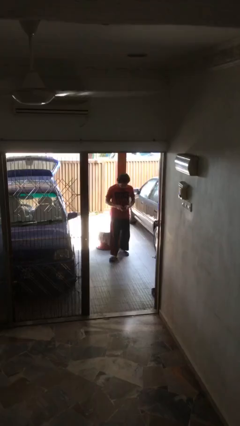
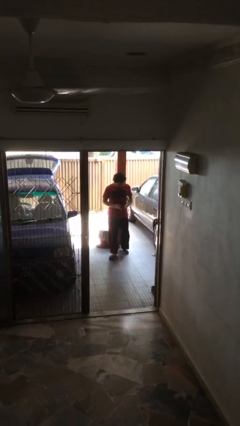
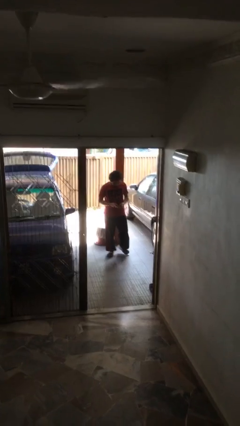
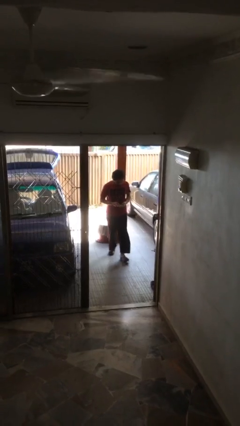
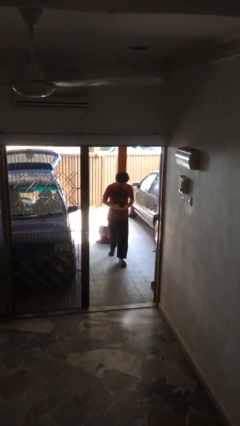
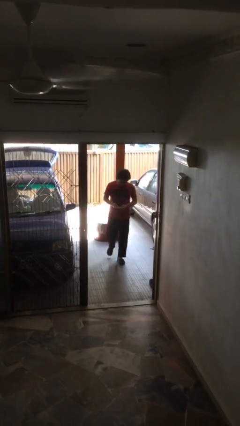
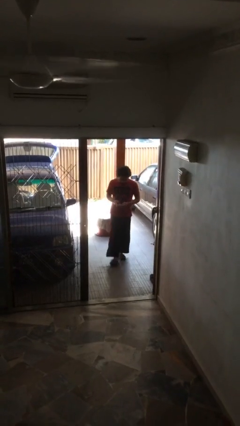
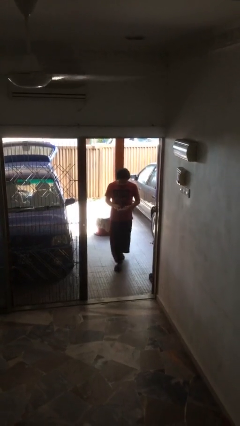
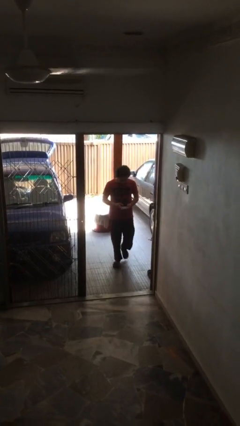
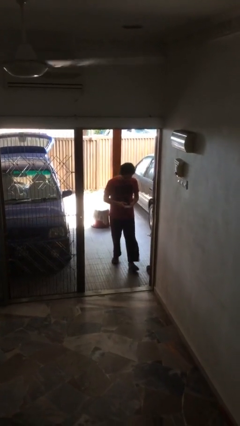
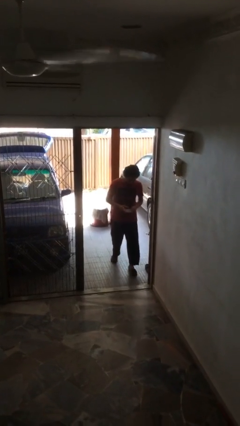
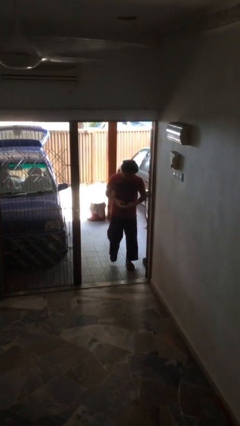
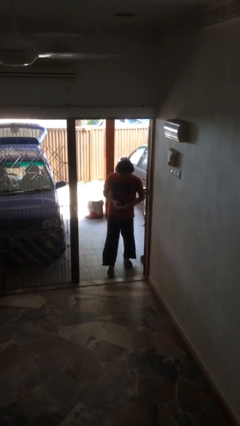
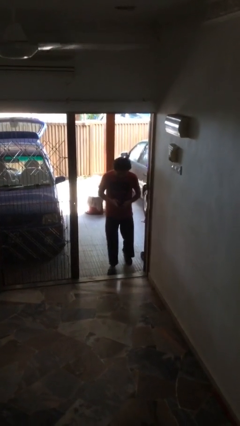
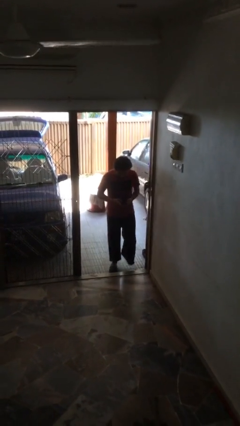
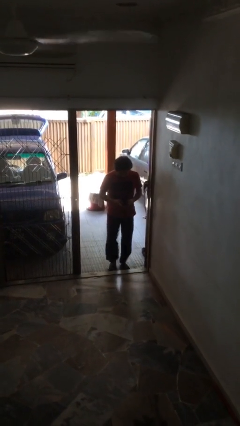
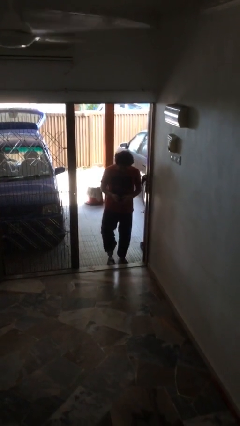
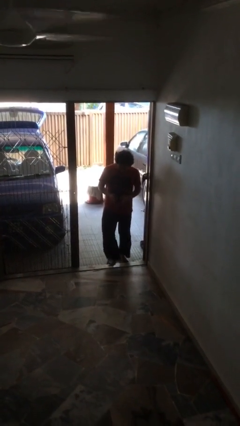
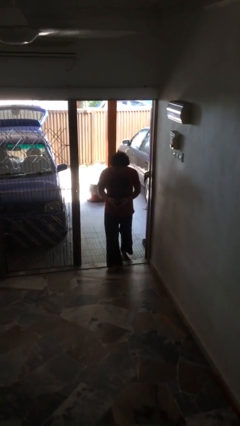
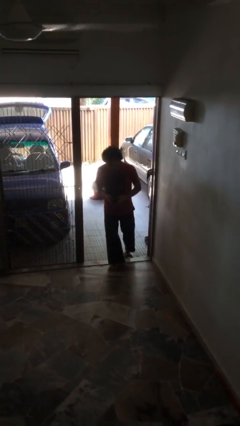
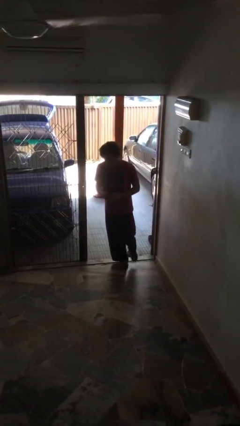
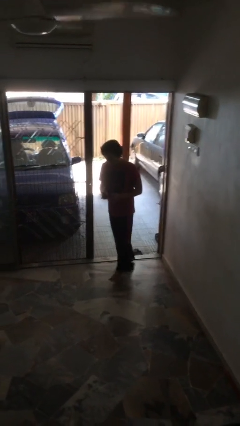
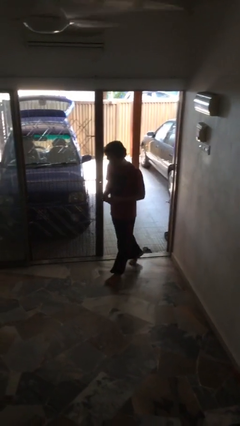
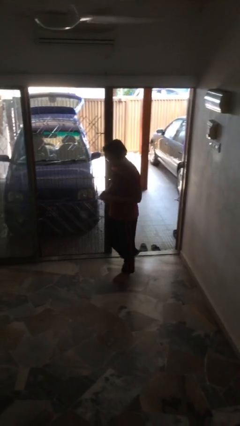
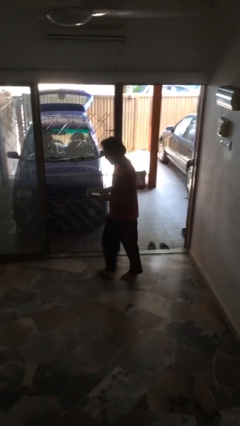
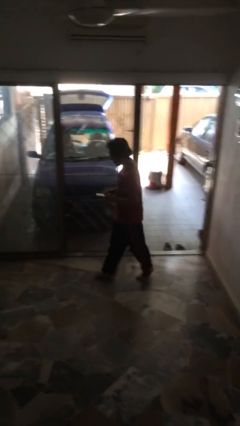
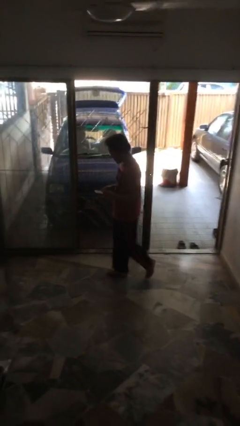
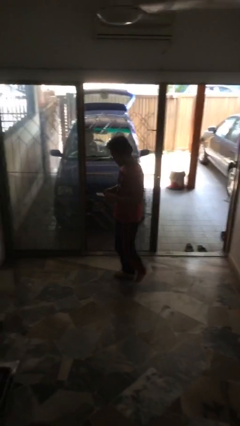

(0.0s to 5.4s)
person texts on phone

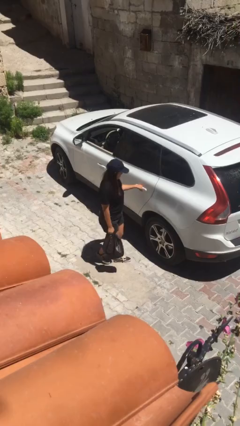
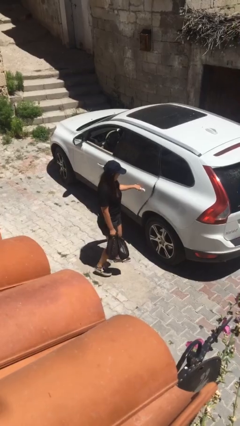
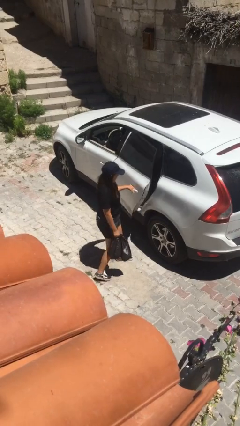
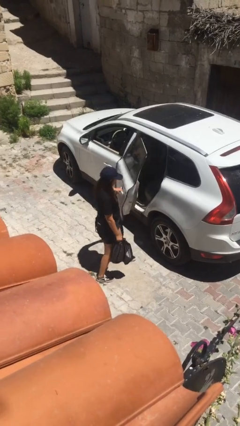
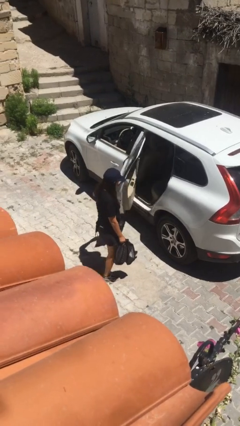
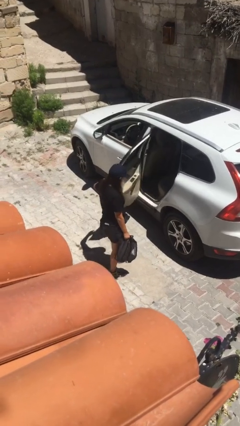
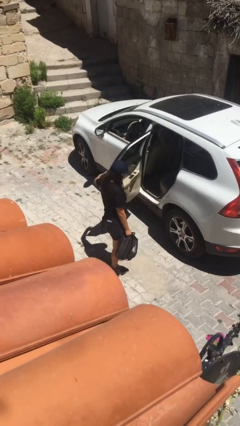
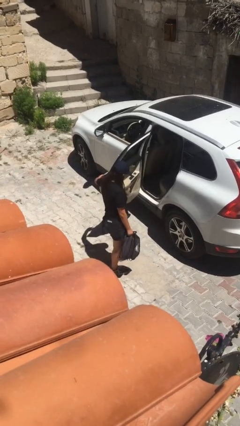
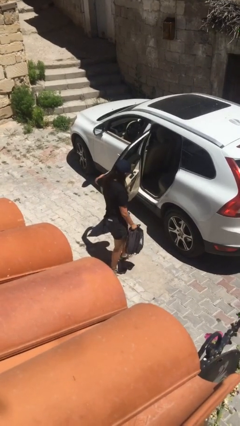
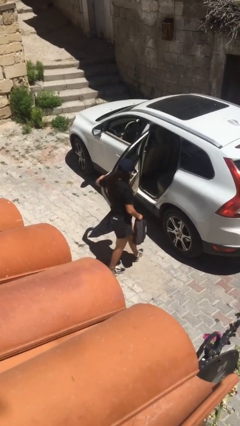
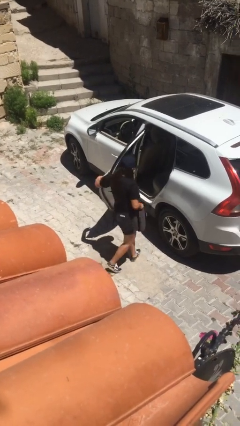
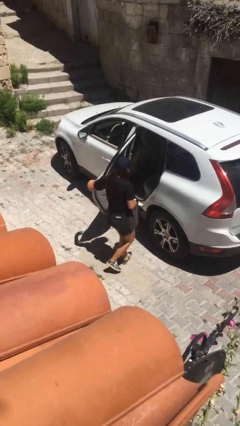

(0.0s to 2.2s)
person opens car door

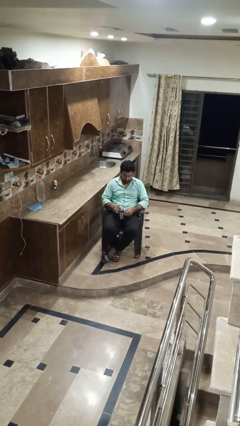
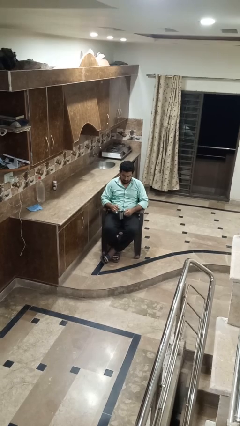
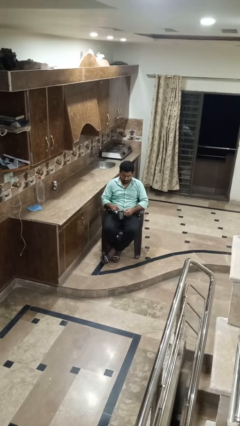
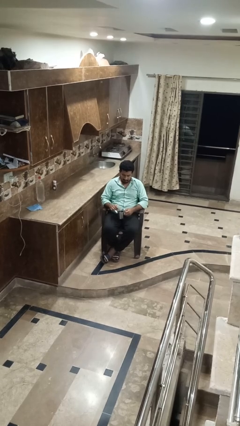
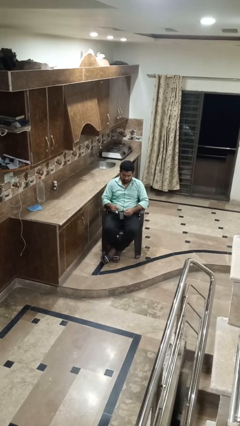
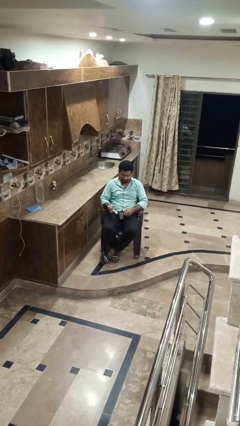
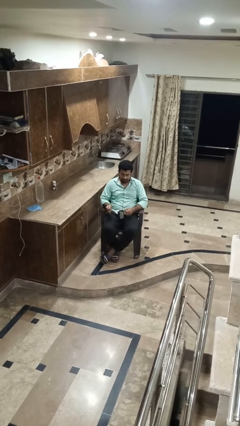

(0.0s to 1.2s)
person stirs mug

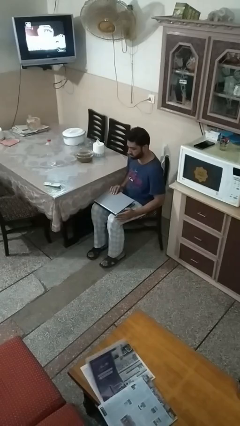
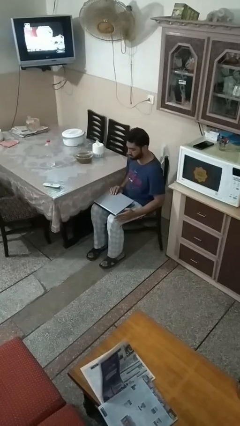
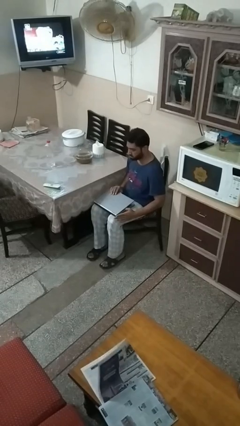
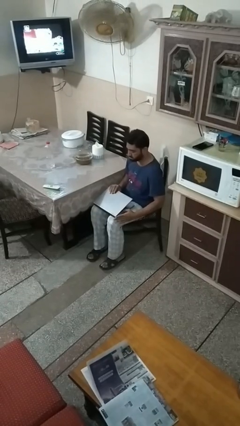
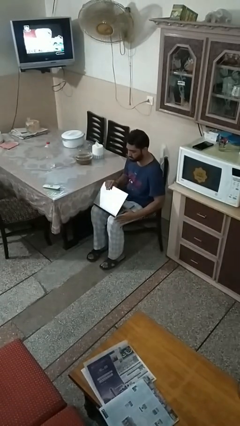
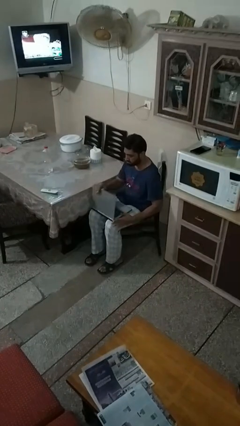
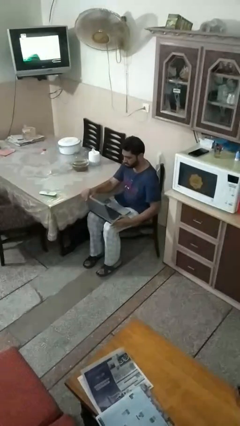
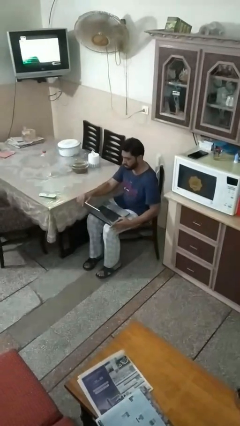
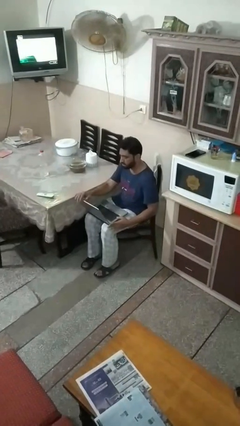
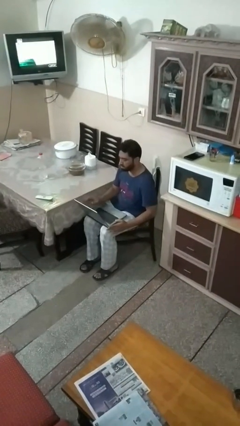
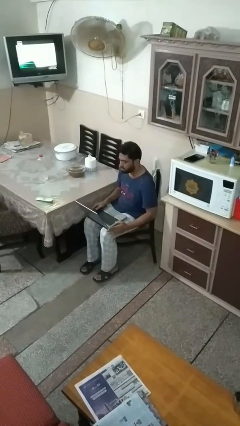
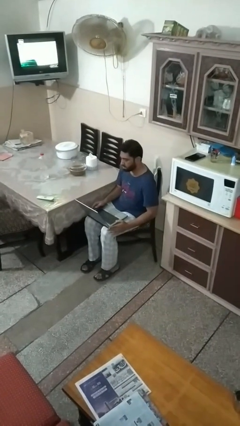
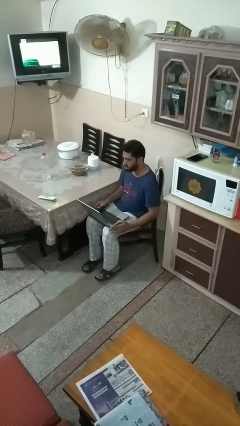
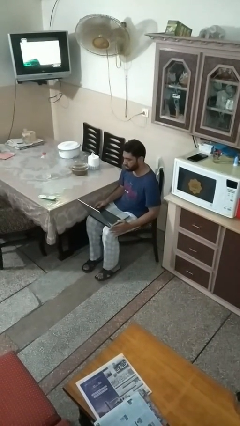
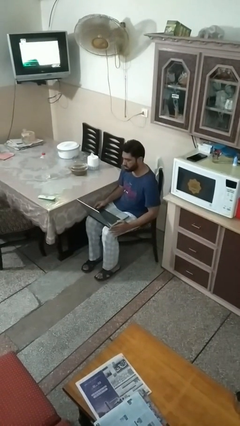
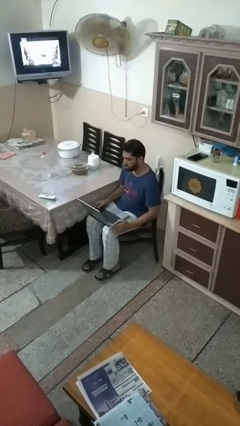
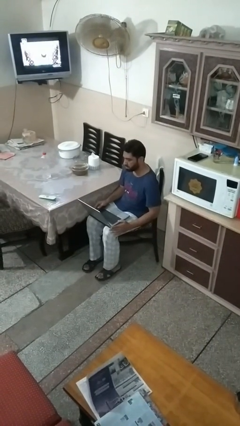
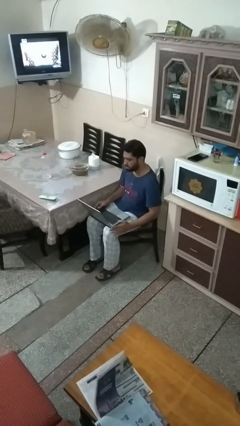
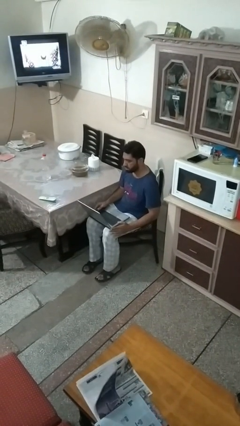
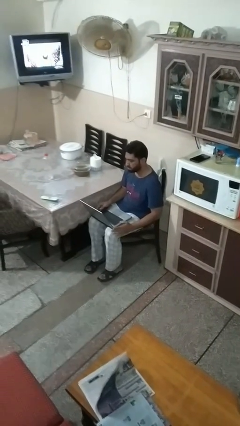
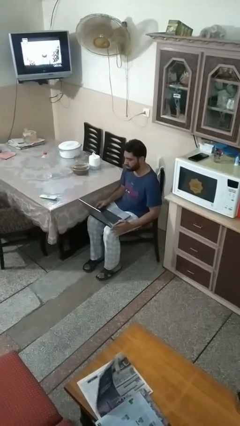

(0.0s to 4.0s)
person opens laptop

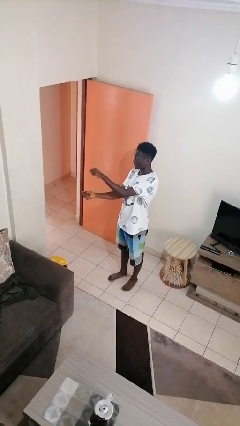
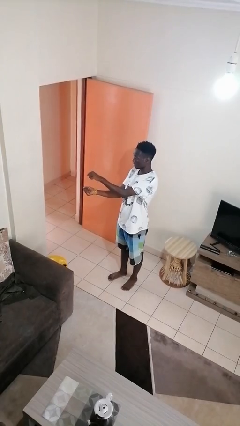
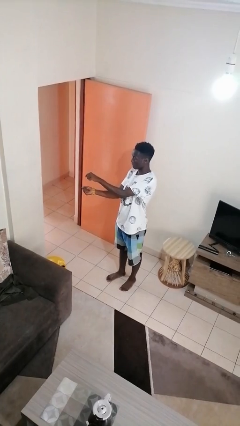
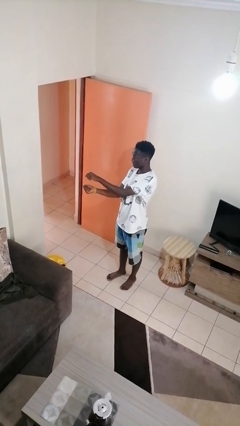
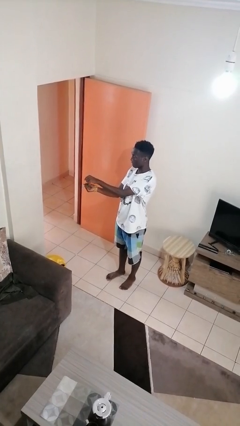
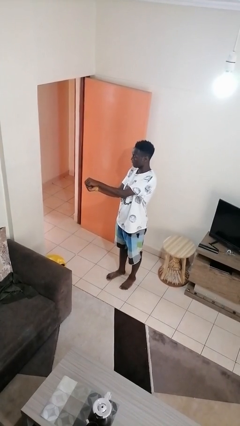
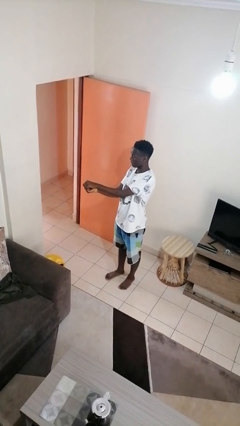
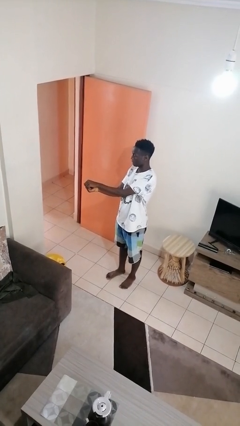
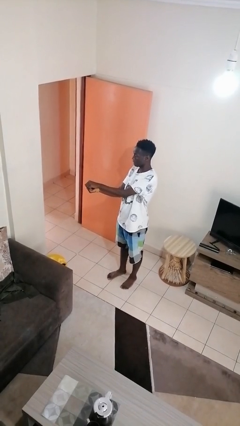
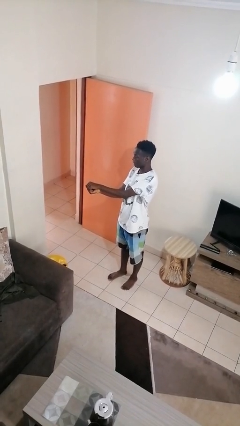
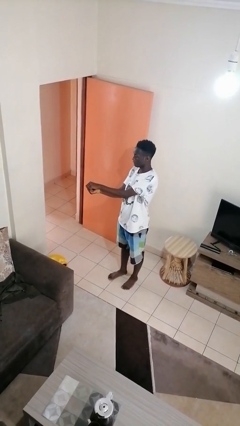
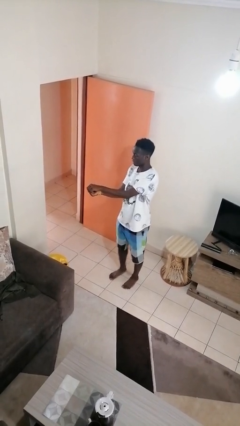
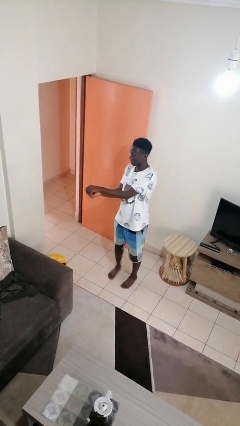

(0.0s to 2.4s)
person gestures zoom out

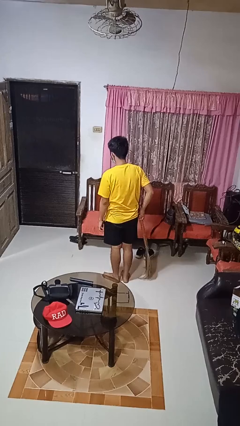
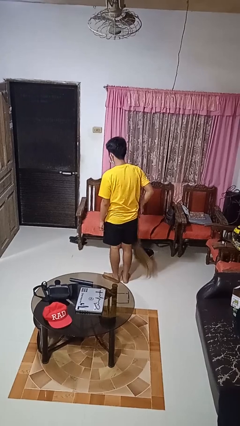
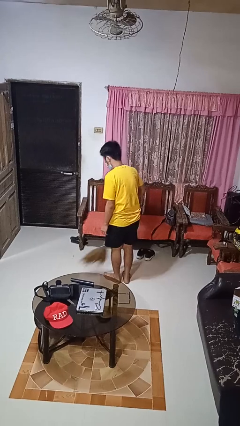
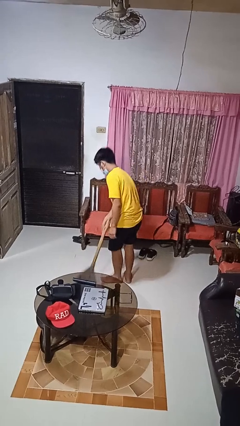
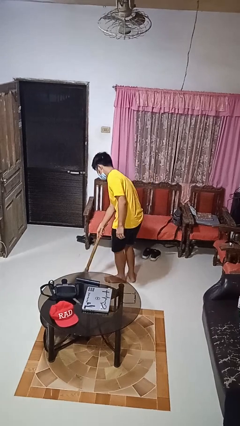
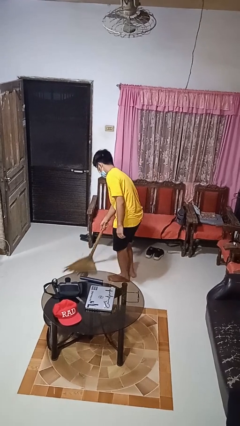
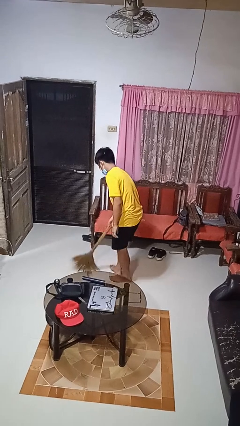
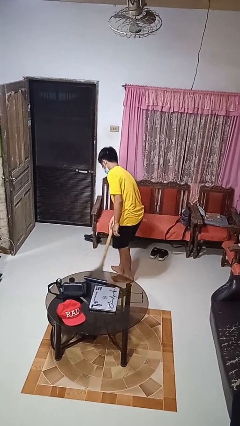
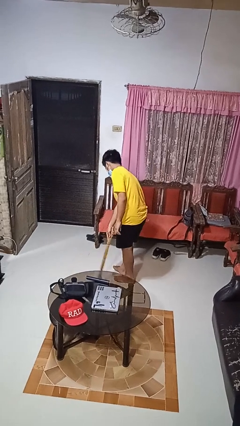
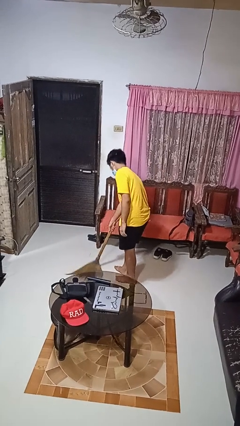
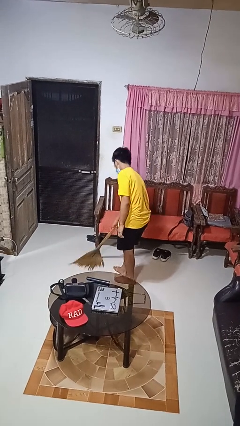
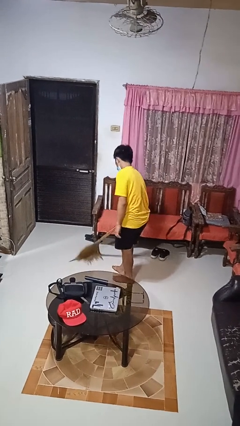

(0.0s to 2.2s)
person sweeps floor
